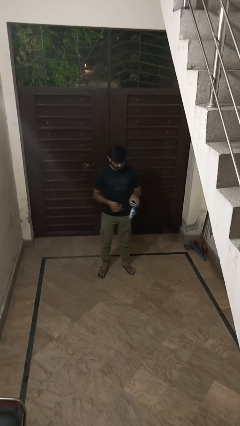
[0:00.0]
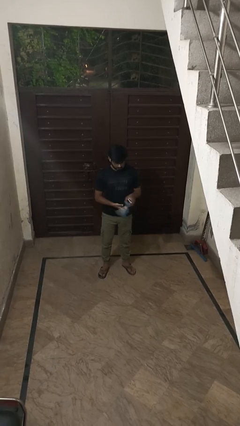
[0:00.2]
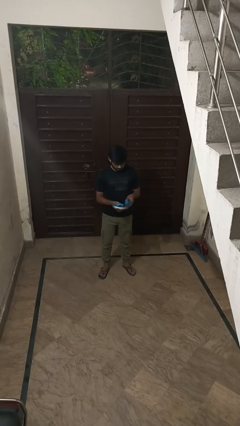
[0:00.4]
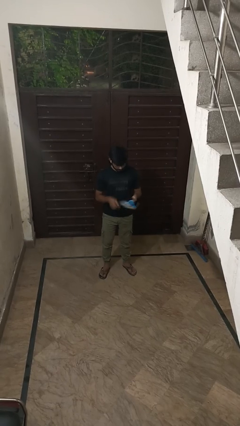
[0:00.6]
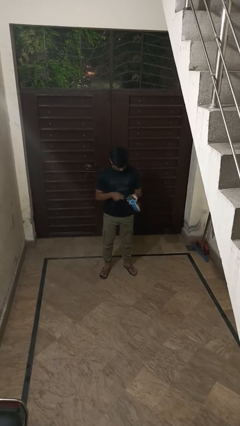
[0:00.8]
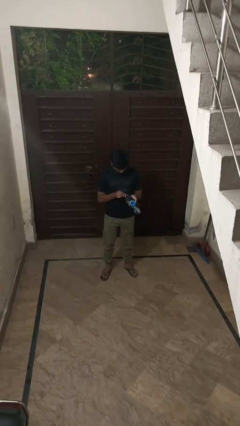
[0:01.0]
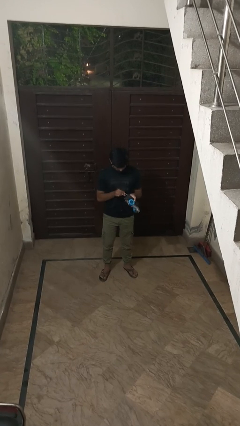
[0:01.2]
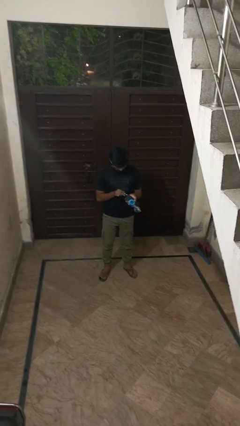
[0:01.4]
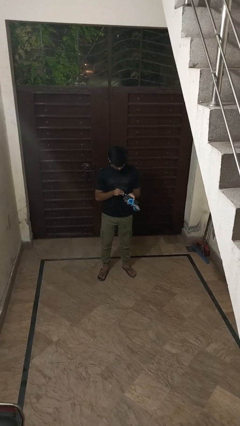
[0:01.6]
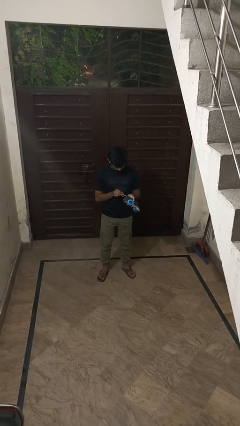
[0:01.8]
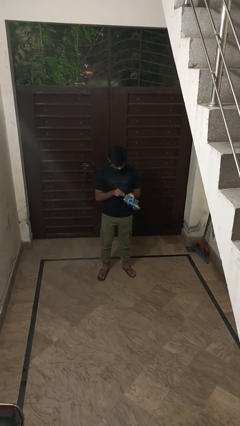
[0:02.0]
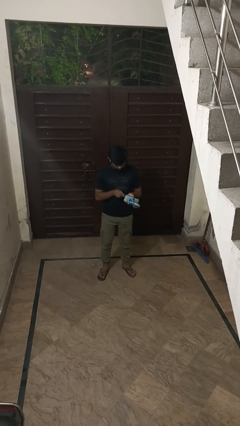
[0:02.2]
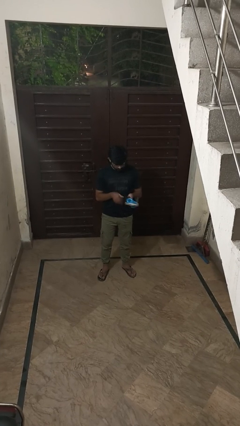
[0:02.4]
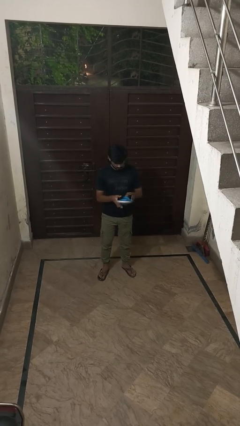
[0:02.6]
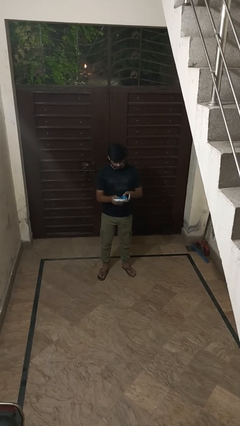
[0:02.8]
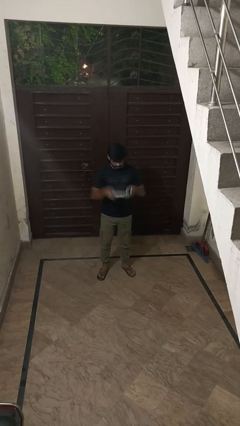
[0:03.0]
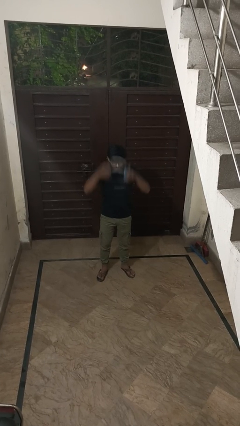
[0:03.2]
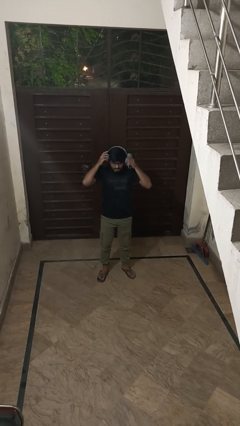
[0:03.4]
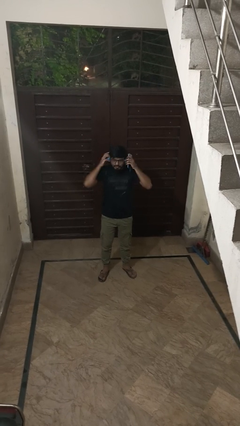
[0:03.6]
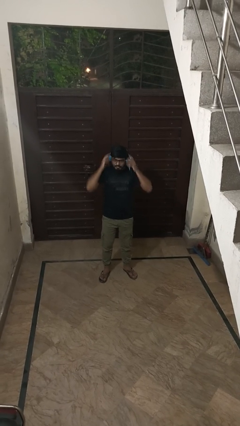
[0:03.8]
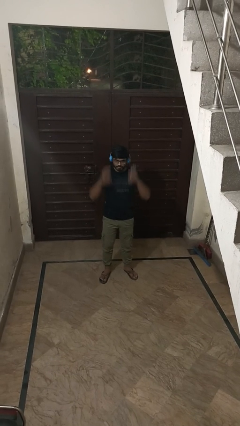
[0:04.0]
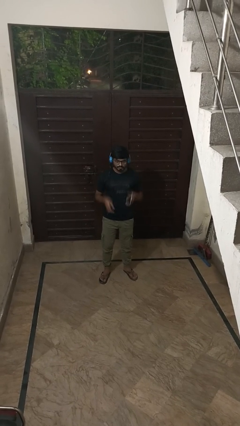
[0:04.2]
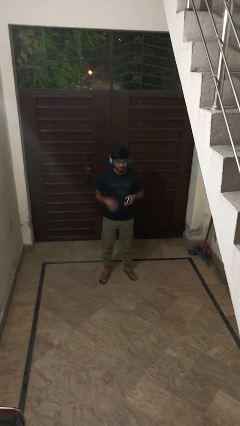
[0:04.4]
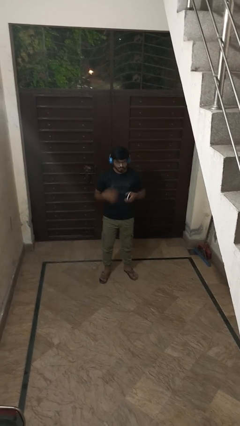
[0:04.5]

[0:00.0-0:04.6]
person puts on headphones

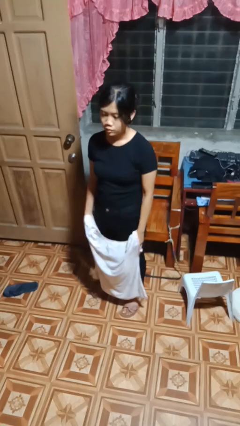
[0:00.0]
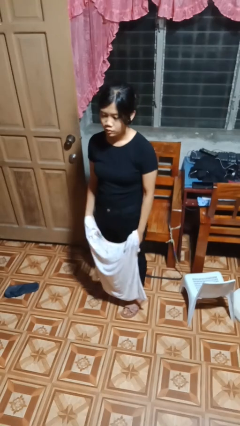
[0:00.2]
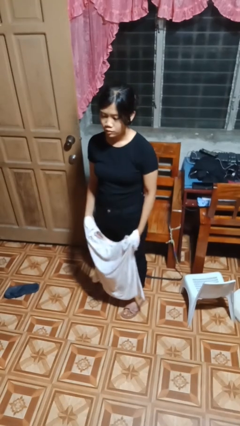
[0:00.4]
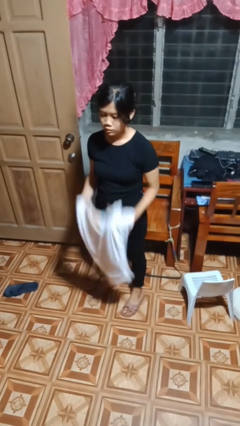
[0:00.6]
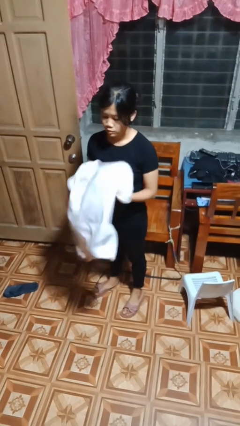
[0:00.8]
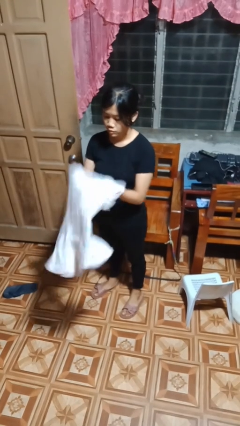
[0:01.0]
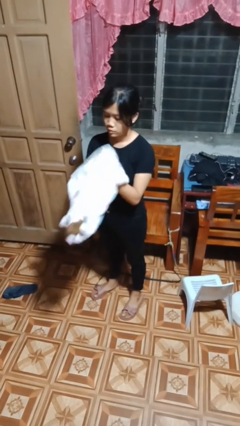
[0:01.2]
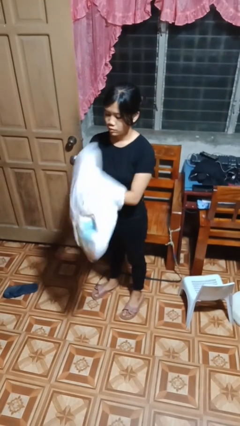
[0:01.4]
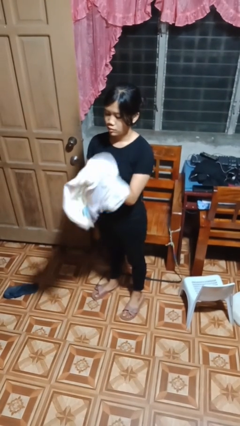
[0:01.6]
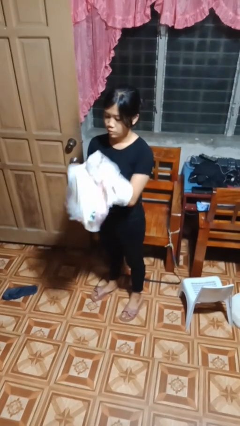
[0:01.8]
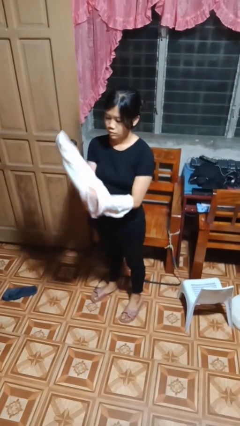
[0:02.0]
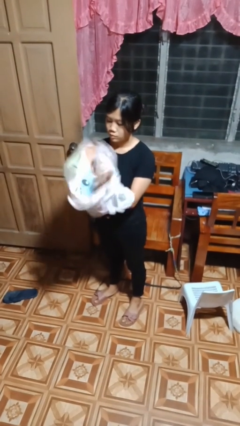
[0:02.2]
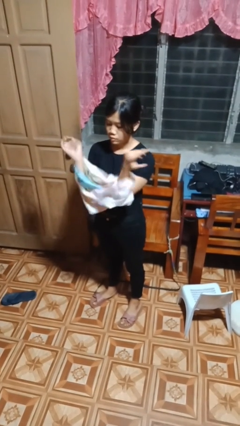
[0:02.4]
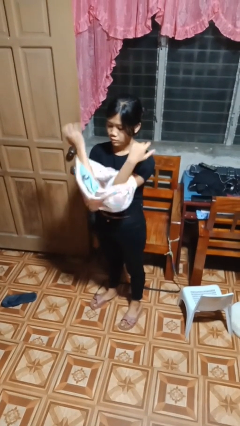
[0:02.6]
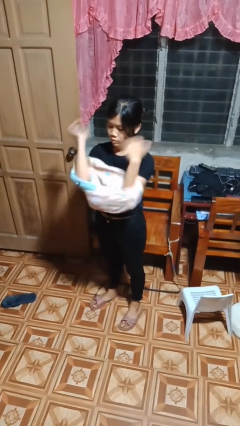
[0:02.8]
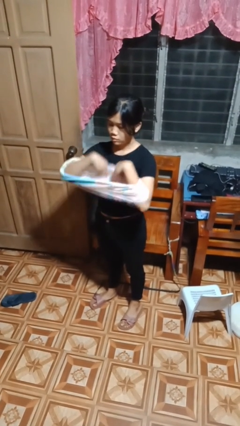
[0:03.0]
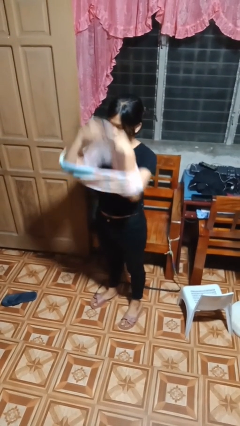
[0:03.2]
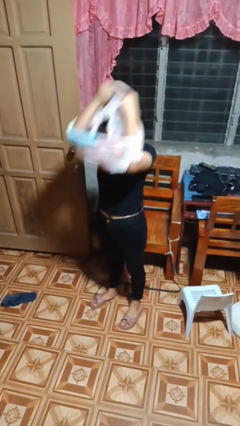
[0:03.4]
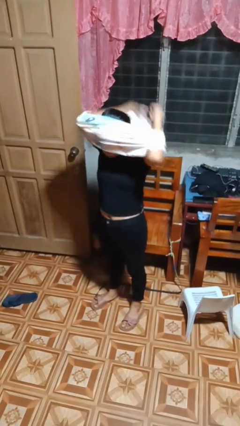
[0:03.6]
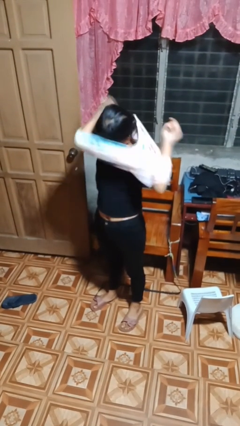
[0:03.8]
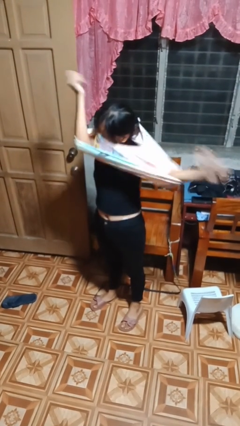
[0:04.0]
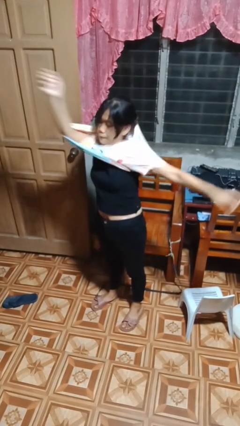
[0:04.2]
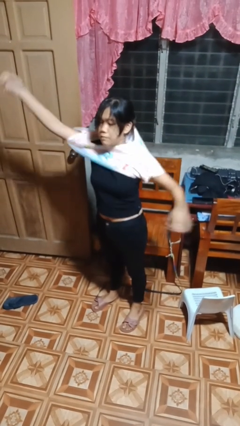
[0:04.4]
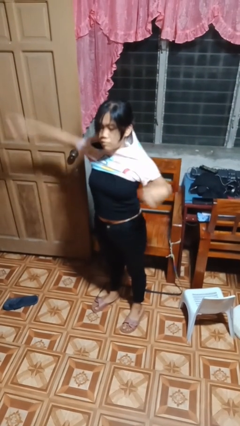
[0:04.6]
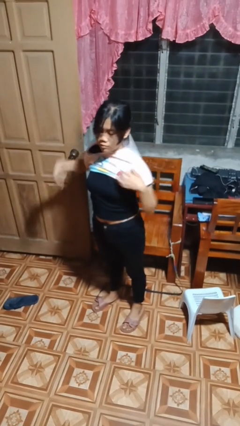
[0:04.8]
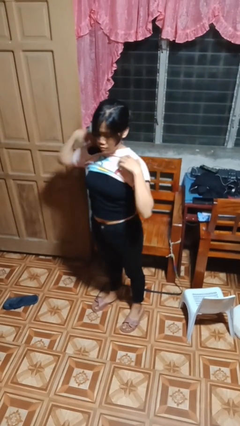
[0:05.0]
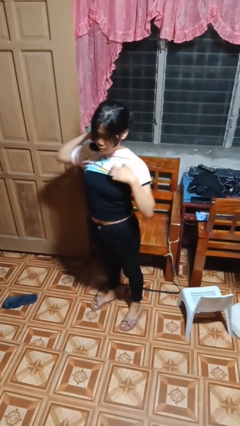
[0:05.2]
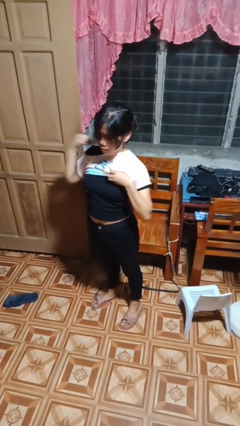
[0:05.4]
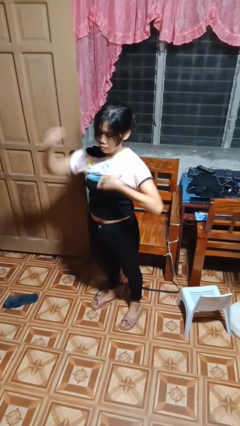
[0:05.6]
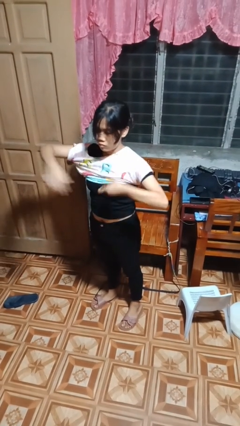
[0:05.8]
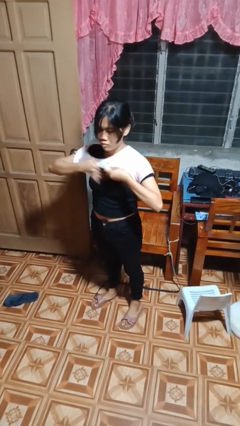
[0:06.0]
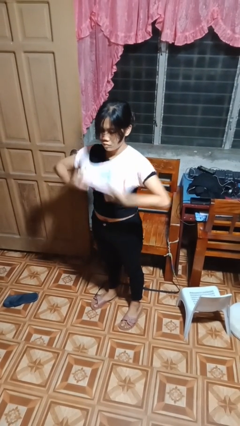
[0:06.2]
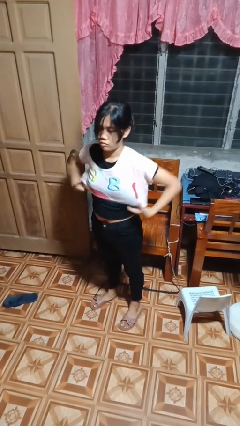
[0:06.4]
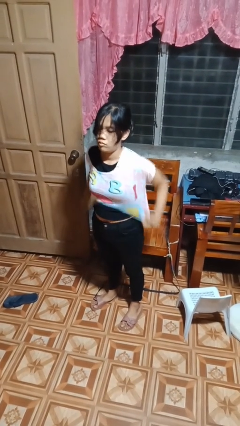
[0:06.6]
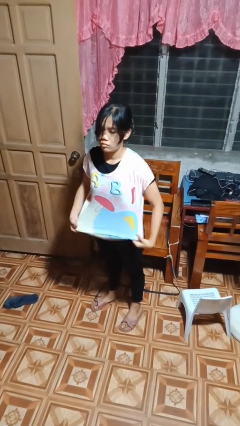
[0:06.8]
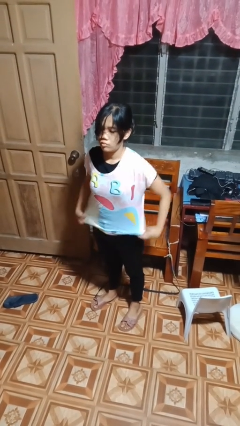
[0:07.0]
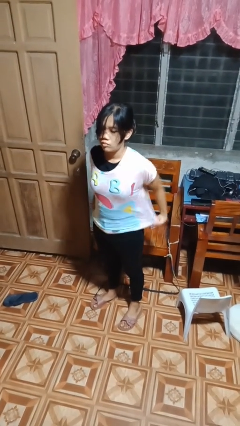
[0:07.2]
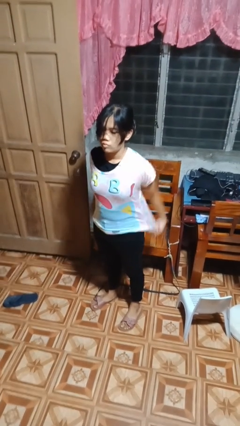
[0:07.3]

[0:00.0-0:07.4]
person puts on shirt

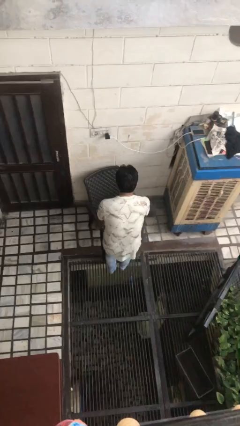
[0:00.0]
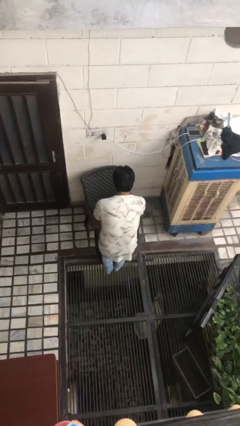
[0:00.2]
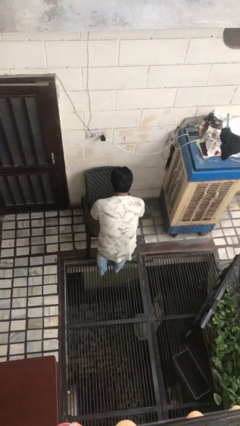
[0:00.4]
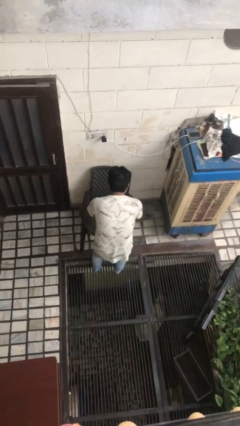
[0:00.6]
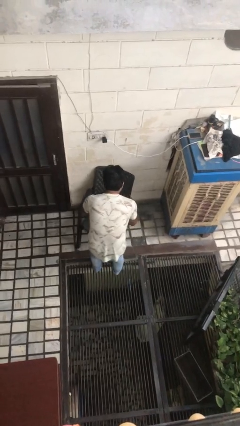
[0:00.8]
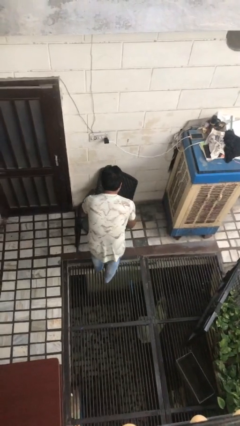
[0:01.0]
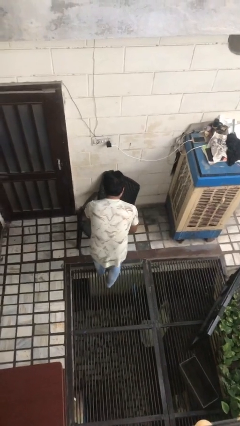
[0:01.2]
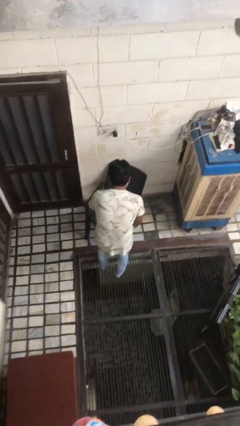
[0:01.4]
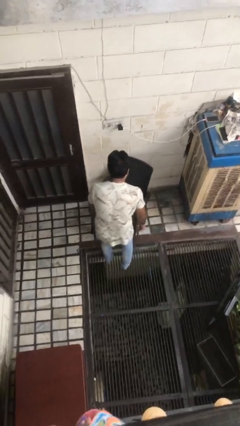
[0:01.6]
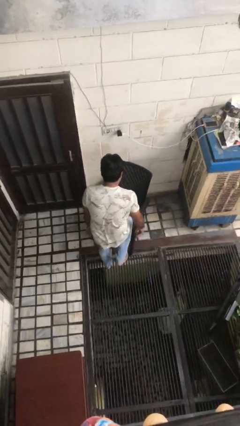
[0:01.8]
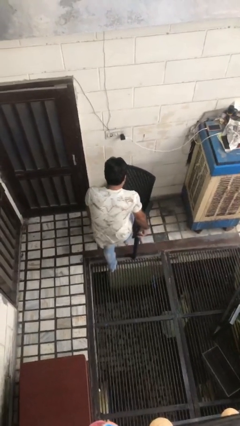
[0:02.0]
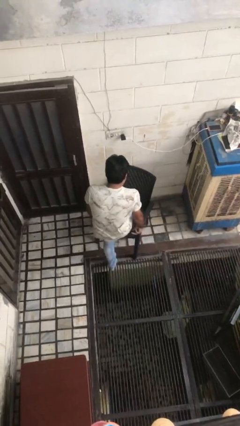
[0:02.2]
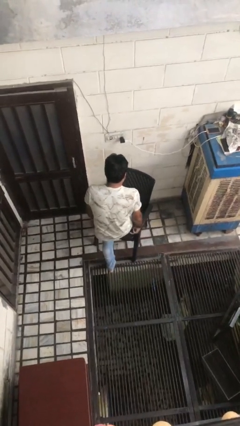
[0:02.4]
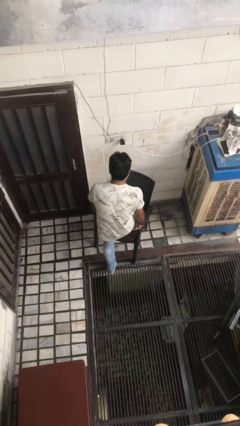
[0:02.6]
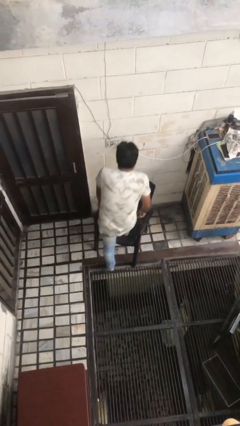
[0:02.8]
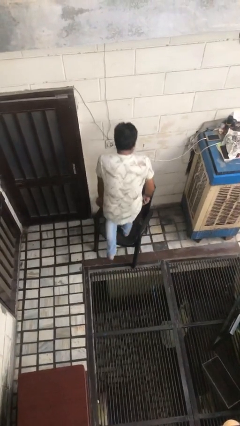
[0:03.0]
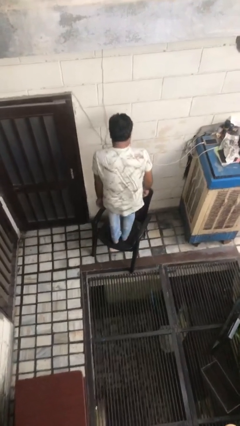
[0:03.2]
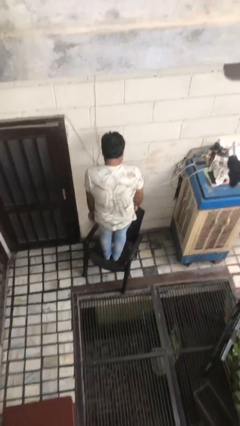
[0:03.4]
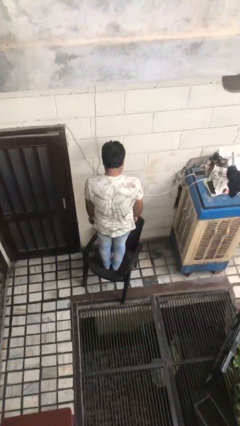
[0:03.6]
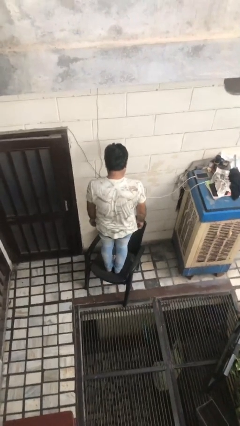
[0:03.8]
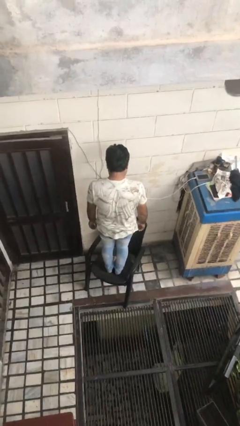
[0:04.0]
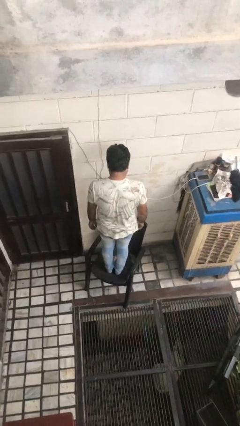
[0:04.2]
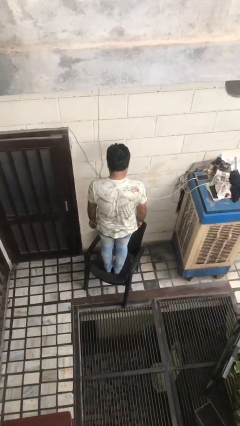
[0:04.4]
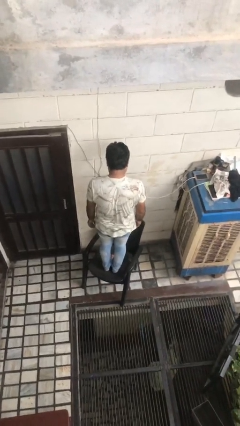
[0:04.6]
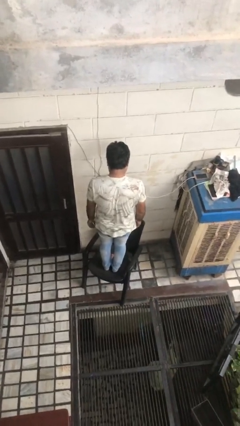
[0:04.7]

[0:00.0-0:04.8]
person climbs on chair

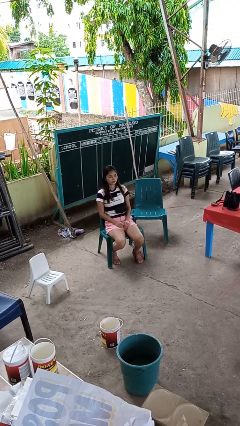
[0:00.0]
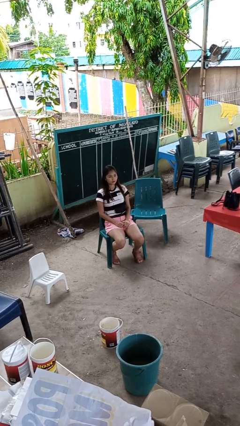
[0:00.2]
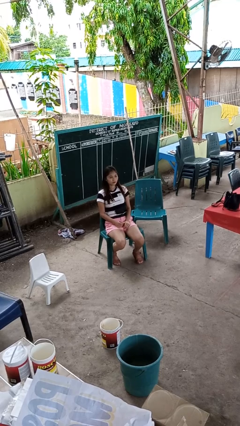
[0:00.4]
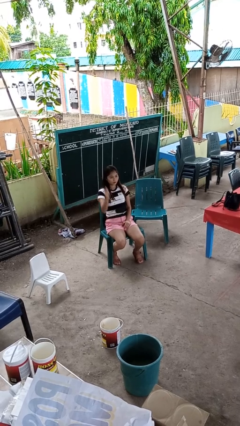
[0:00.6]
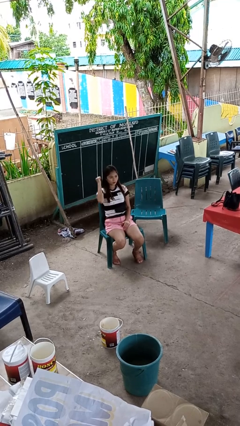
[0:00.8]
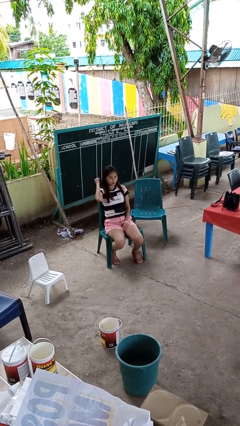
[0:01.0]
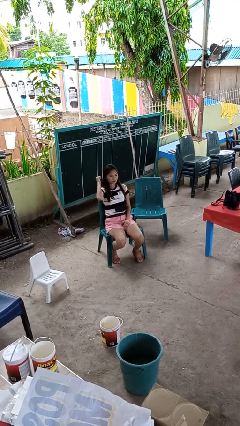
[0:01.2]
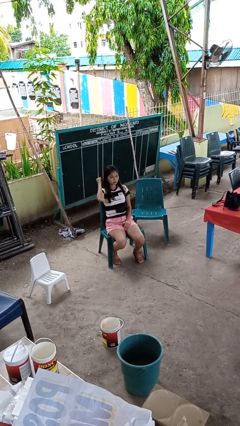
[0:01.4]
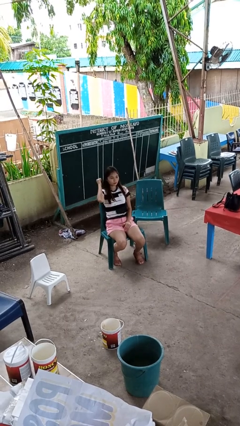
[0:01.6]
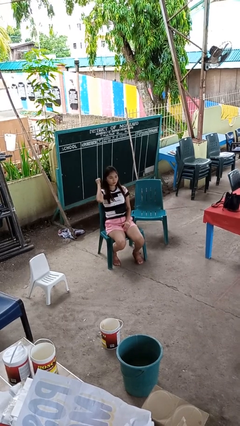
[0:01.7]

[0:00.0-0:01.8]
person gestures behind me
